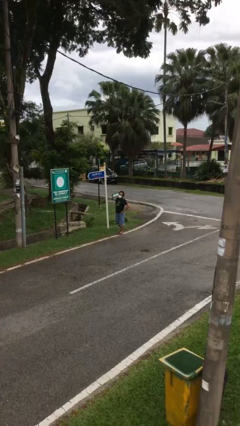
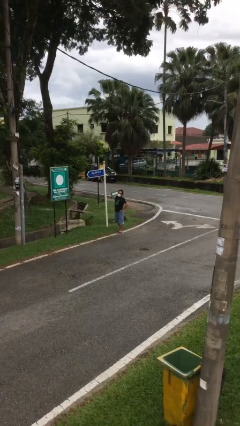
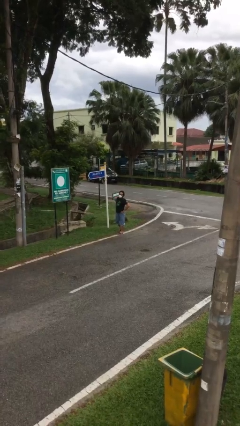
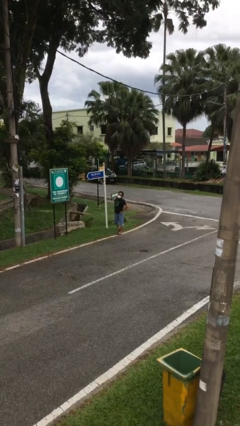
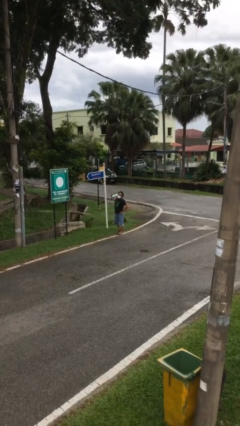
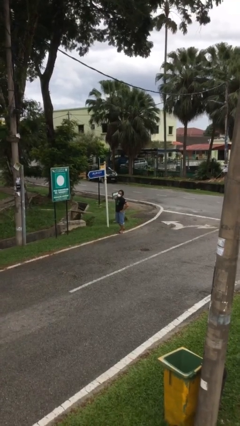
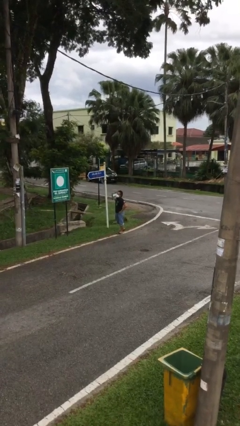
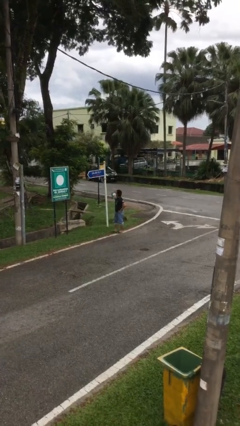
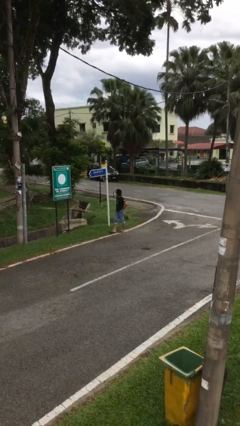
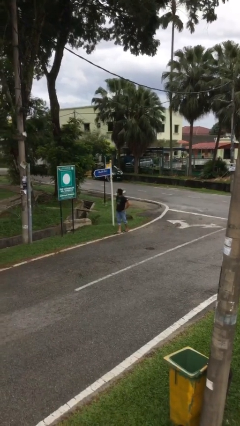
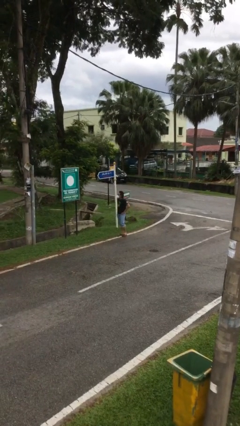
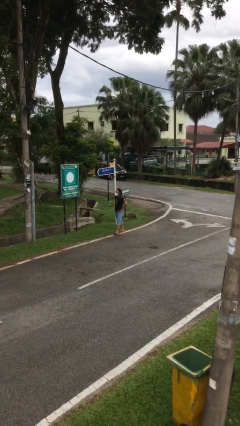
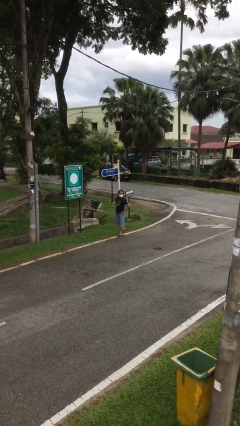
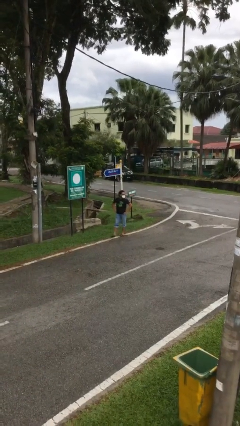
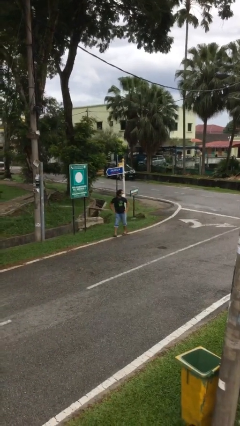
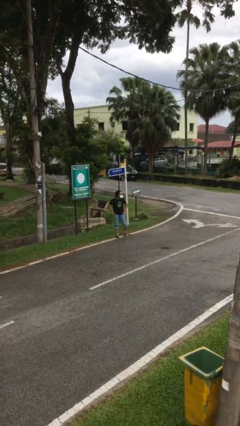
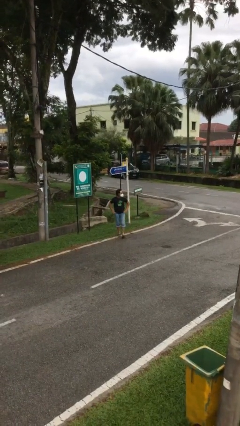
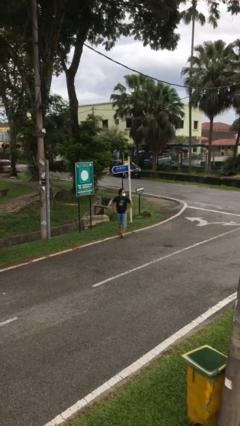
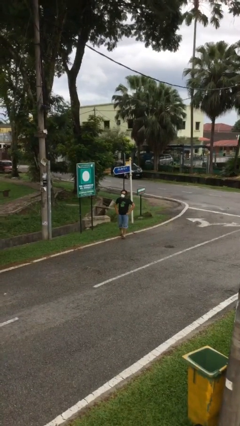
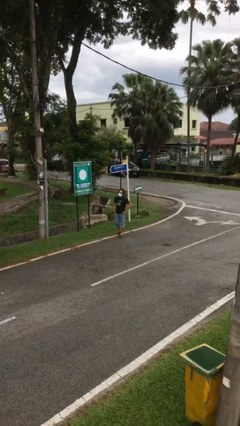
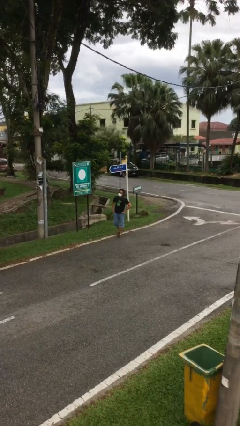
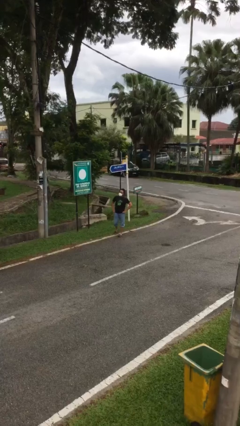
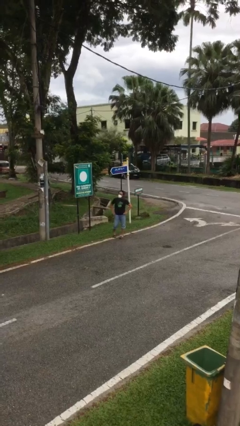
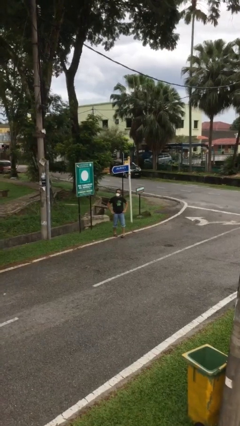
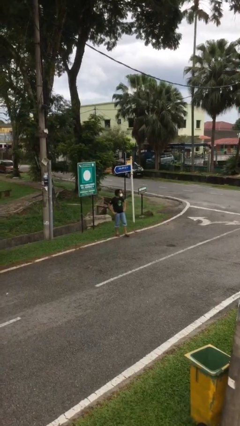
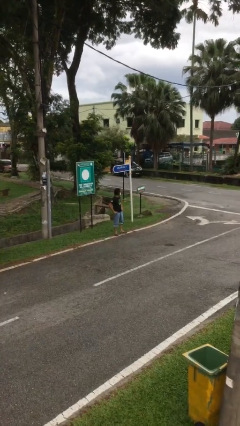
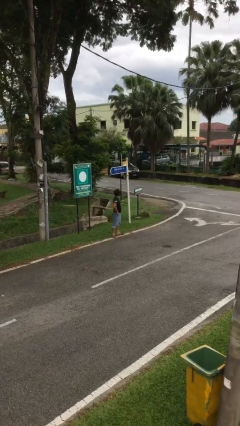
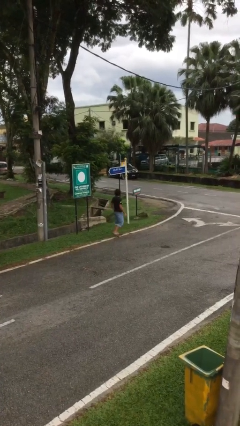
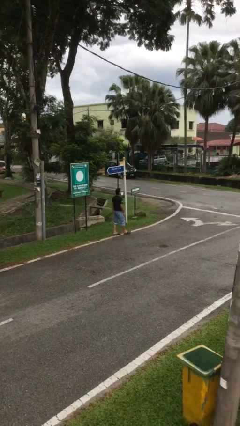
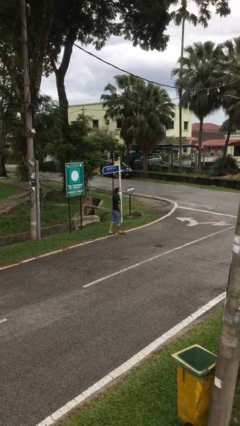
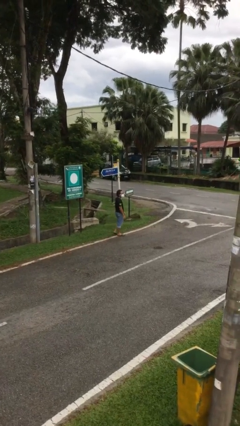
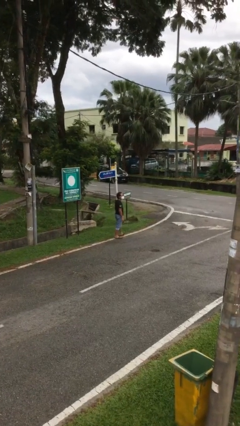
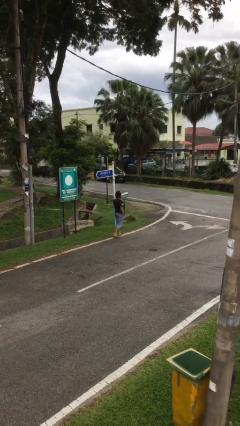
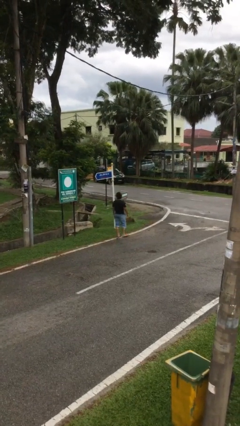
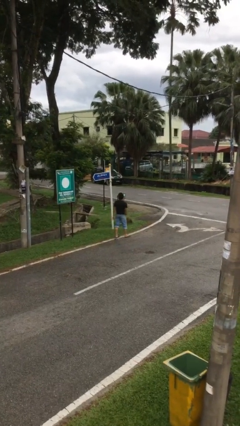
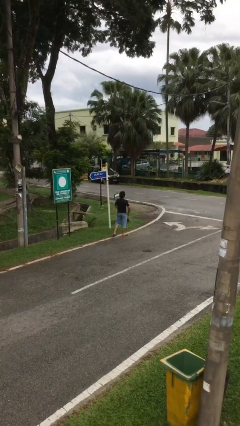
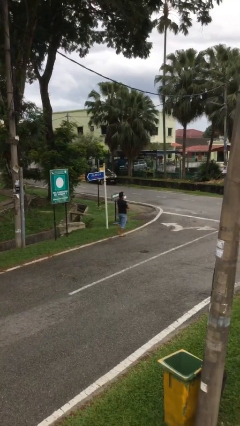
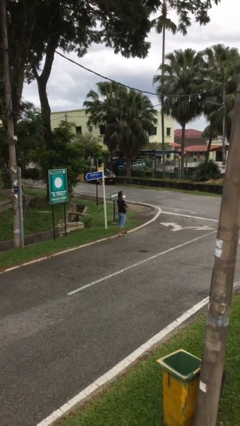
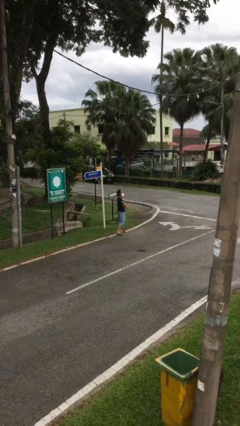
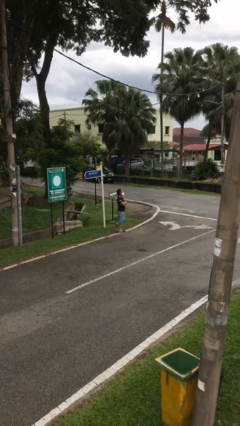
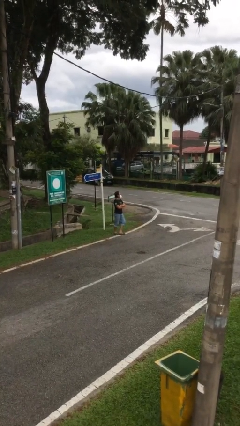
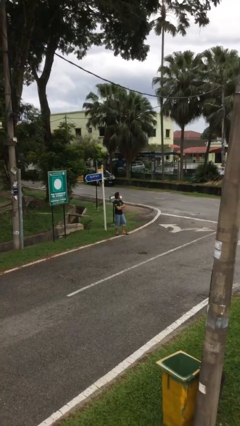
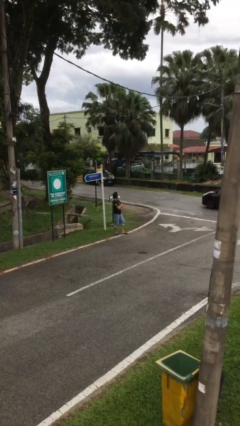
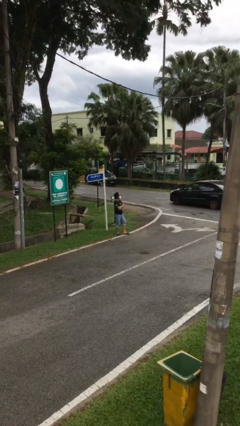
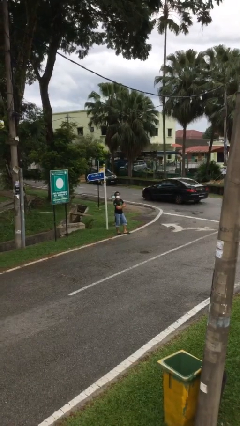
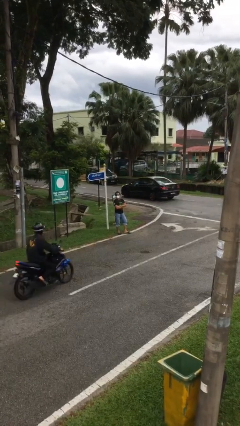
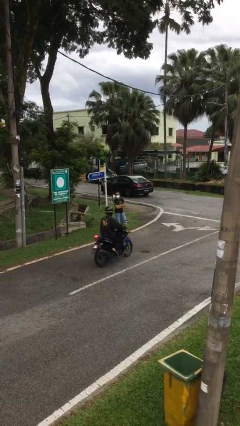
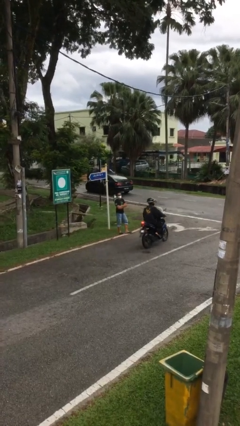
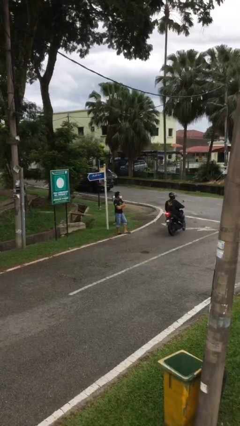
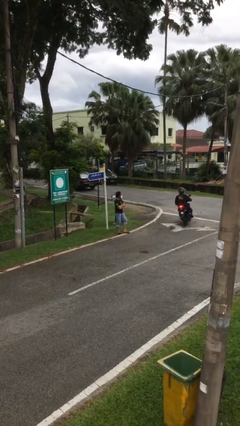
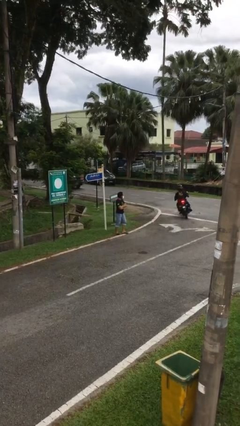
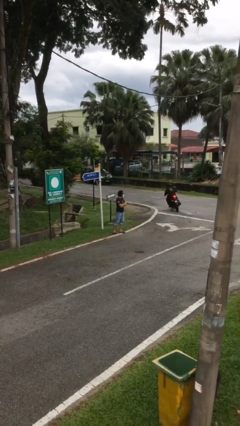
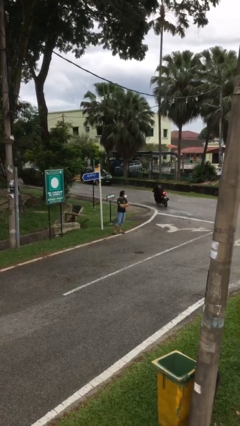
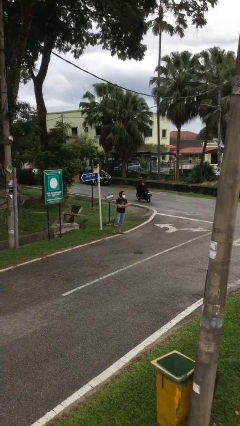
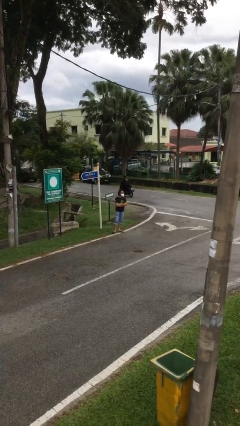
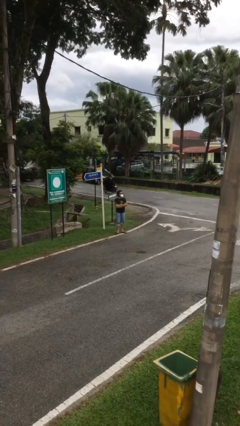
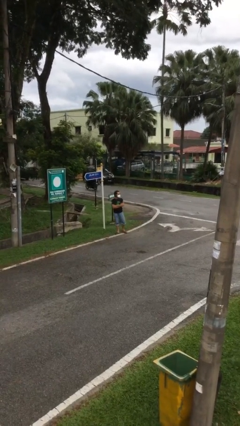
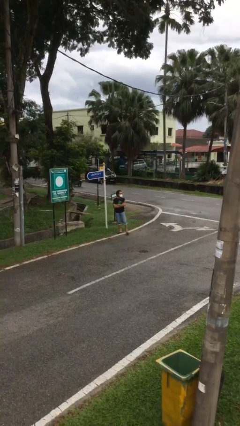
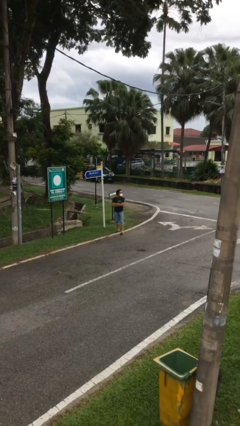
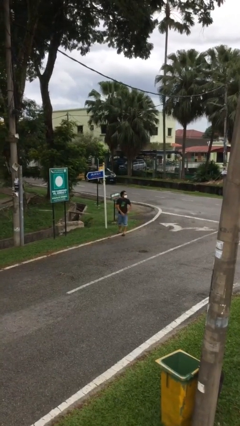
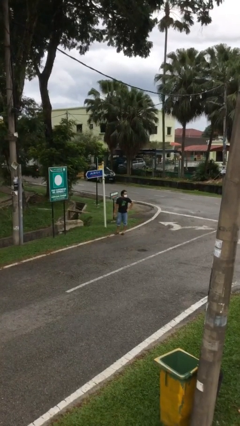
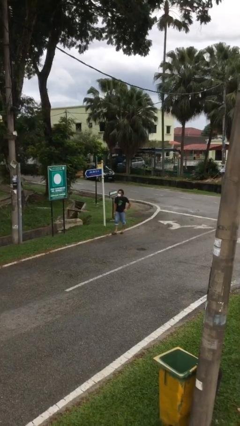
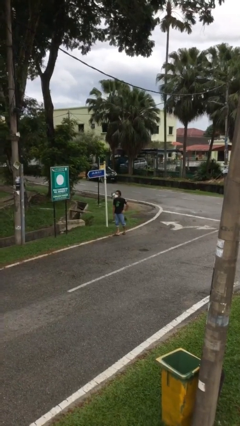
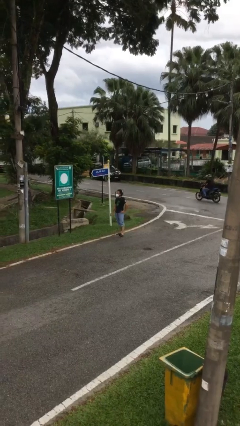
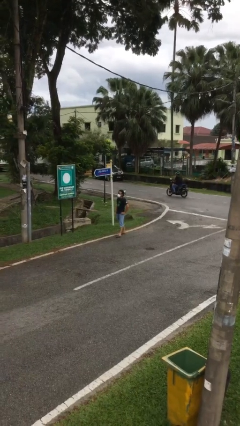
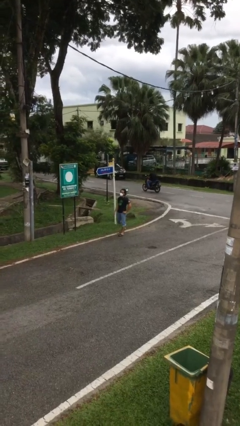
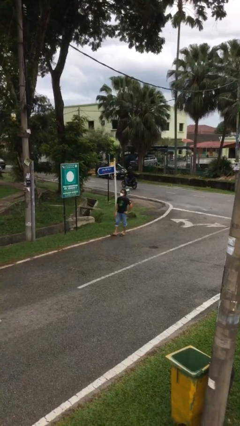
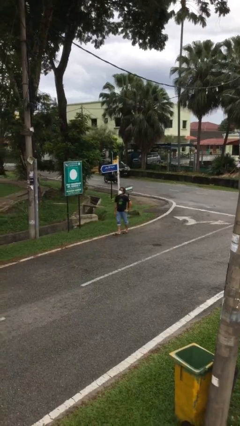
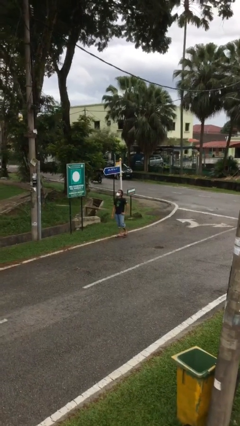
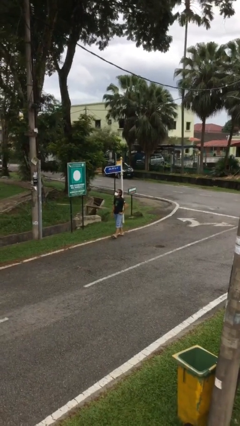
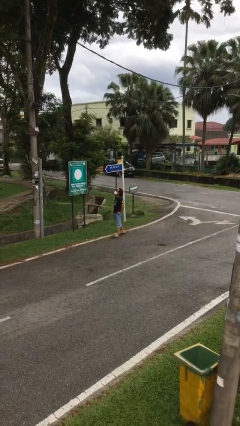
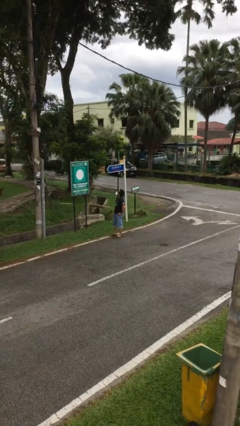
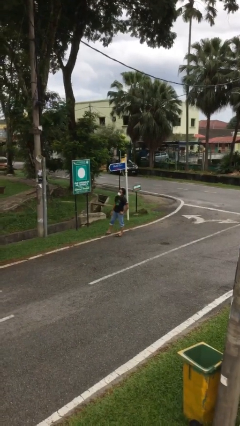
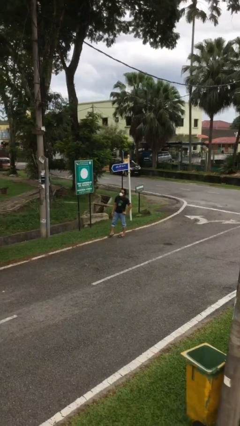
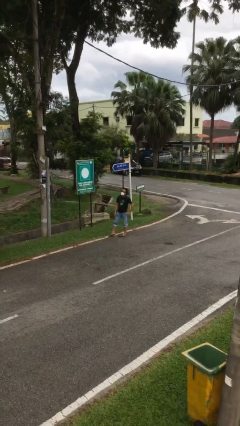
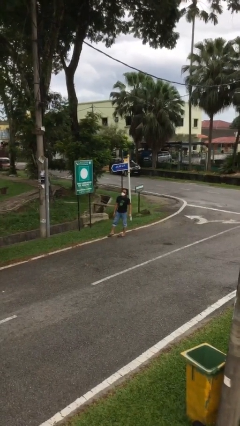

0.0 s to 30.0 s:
person walks

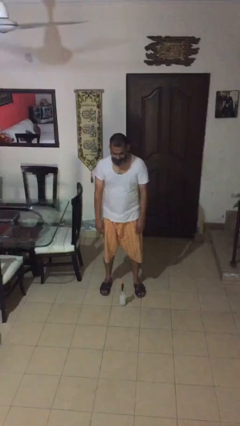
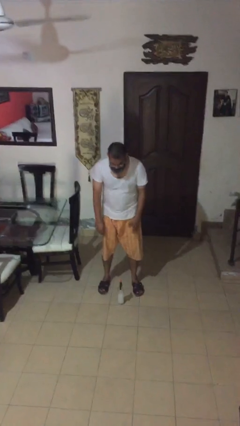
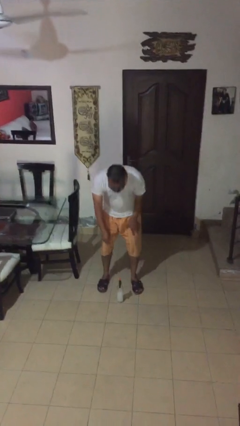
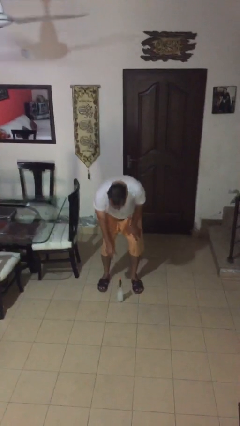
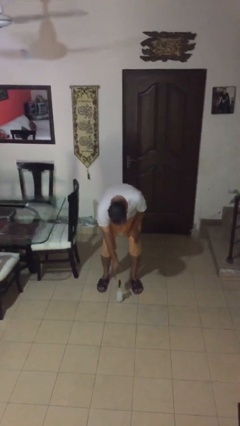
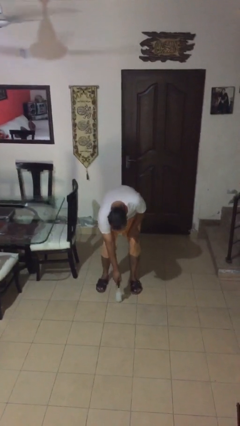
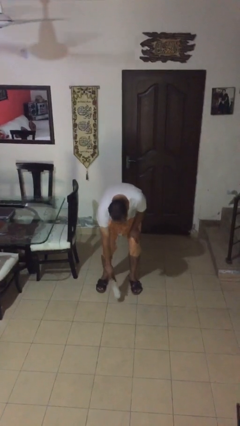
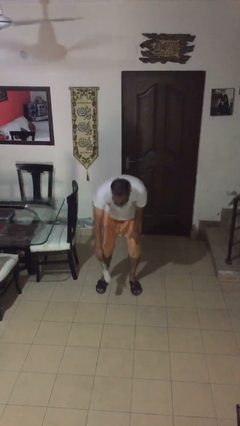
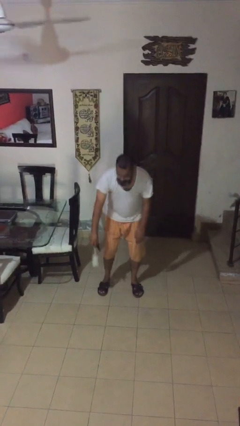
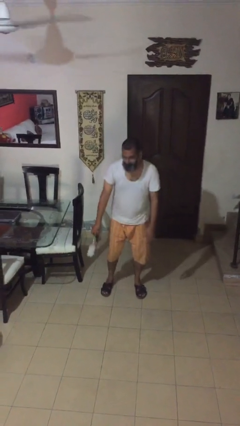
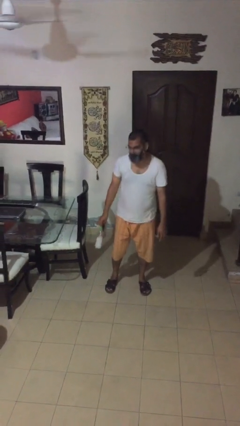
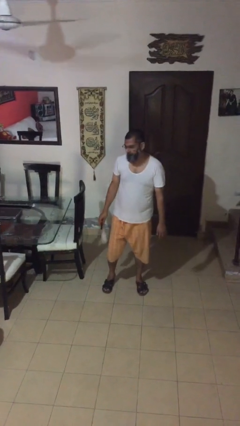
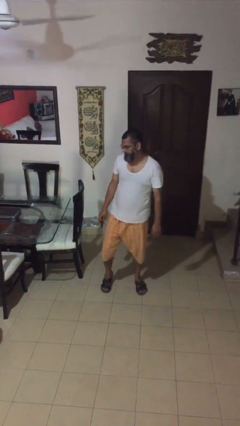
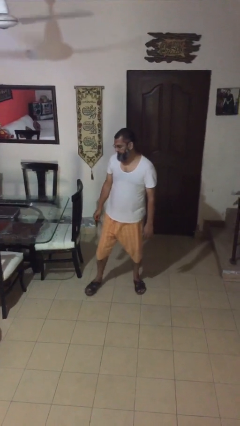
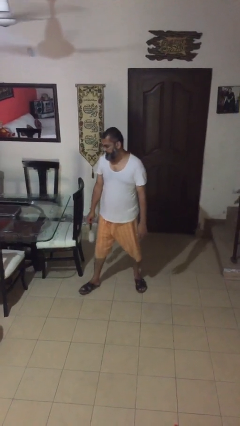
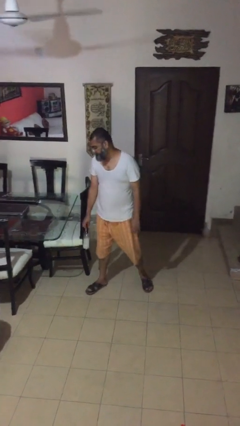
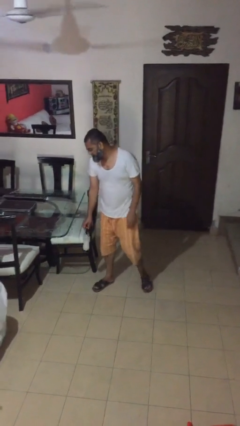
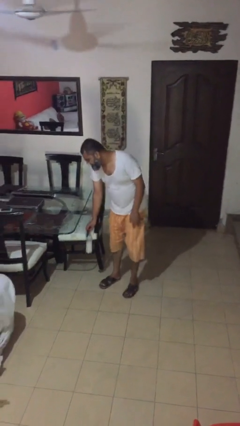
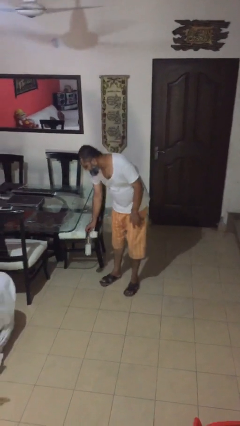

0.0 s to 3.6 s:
person picks up object from floor
